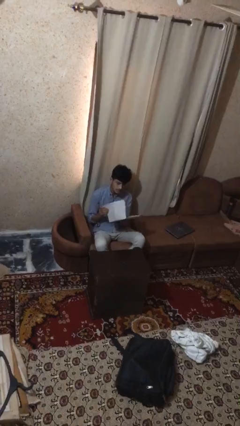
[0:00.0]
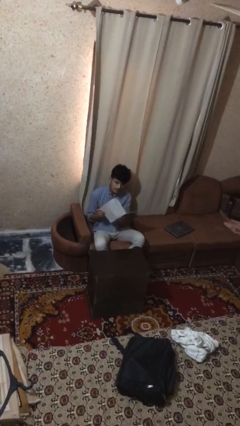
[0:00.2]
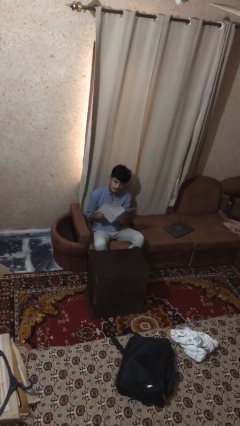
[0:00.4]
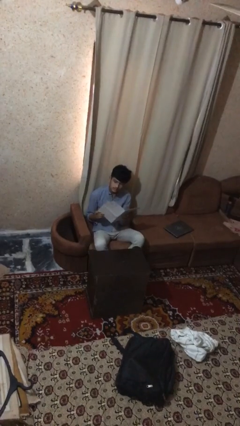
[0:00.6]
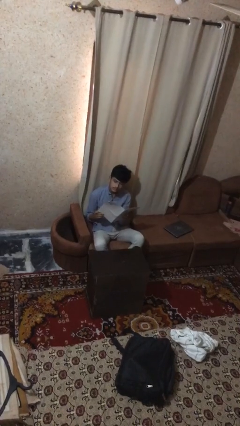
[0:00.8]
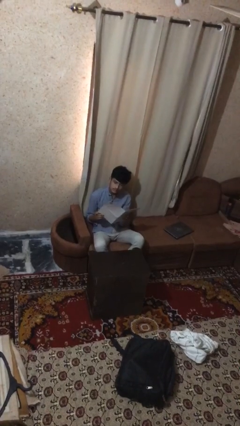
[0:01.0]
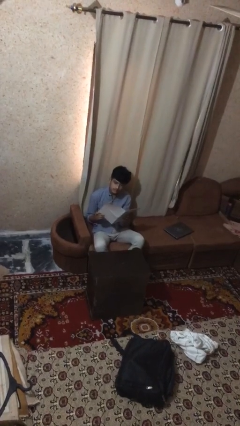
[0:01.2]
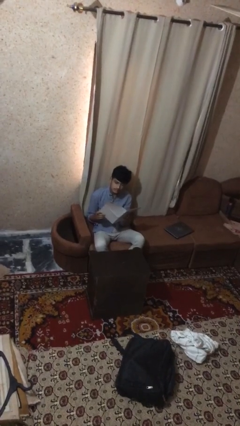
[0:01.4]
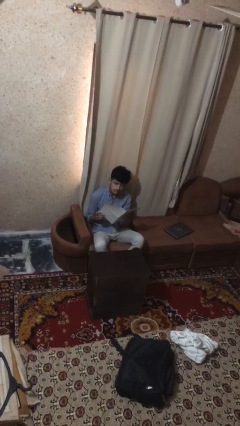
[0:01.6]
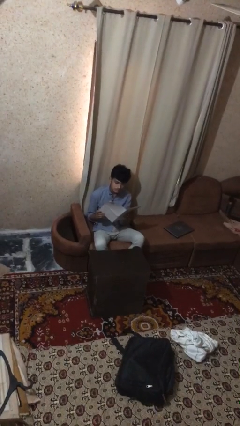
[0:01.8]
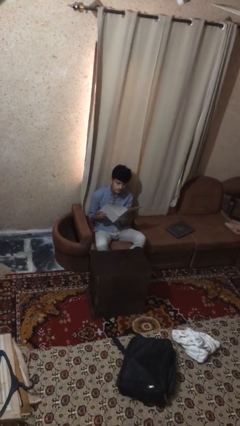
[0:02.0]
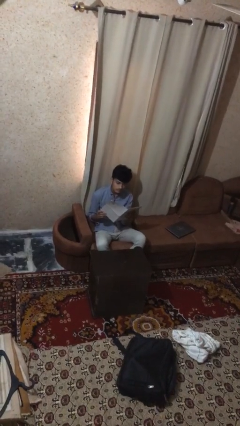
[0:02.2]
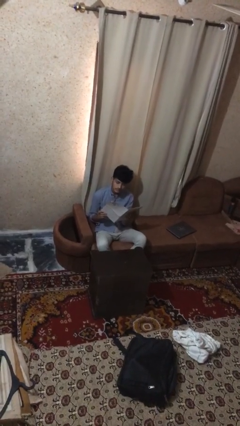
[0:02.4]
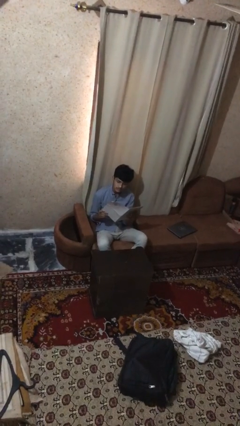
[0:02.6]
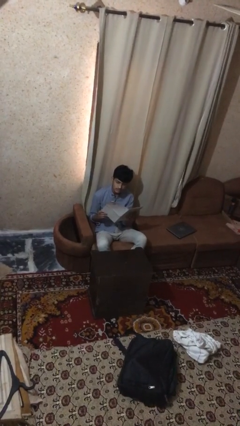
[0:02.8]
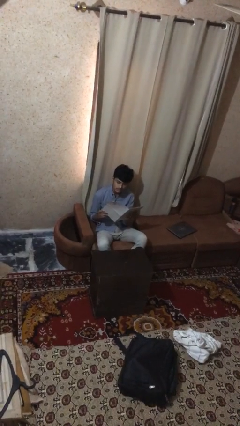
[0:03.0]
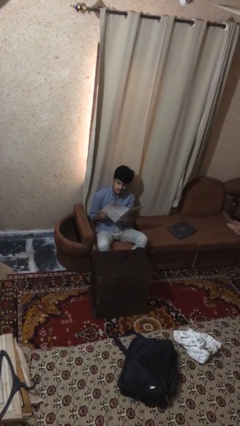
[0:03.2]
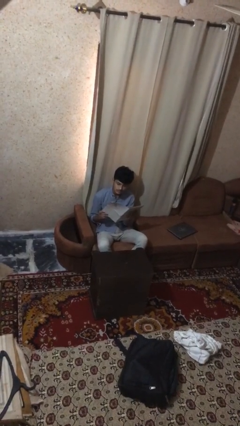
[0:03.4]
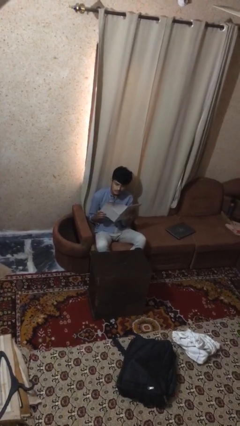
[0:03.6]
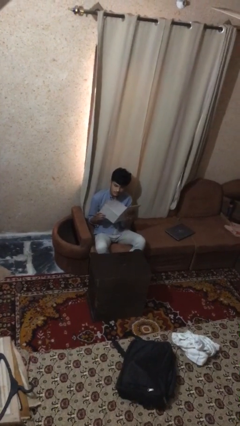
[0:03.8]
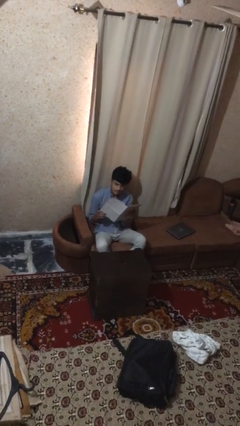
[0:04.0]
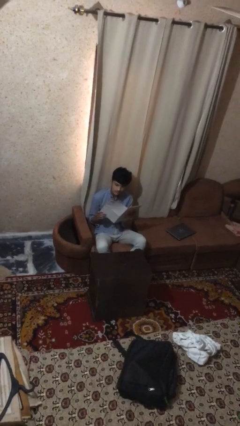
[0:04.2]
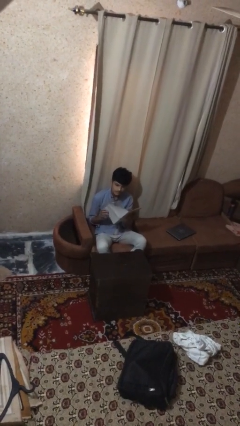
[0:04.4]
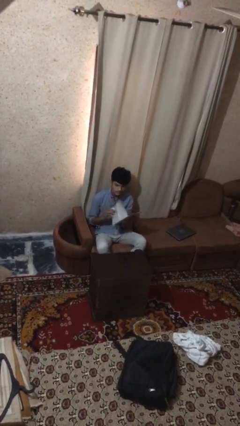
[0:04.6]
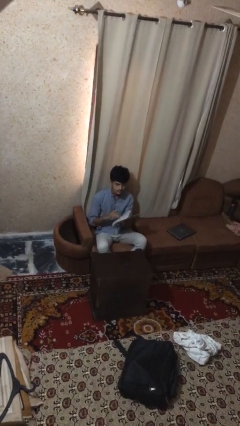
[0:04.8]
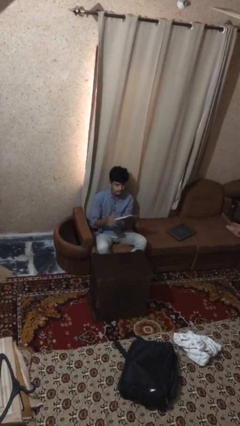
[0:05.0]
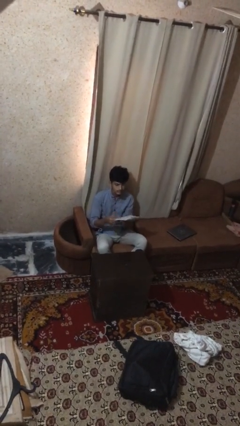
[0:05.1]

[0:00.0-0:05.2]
person reads document

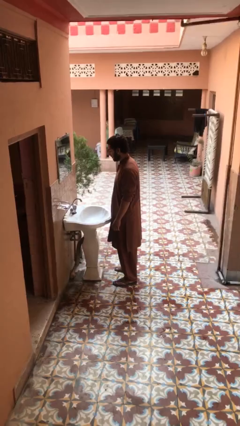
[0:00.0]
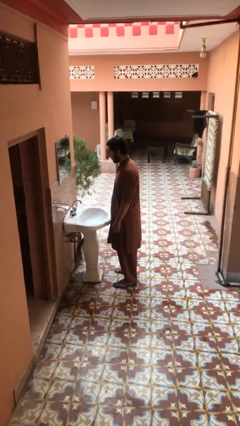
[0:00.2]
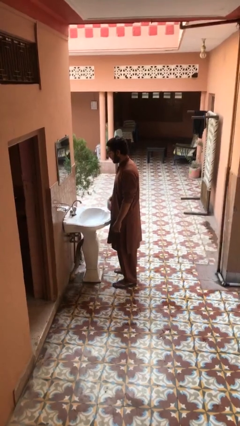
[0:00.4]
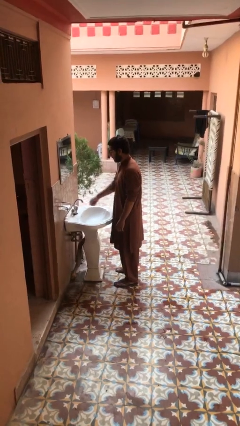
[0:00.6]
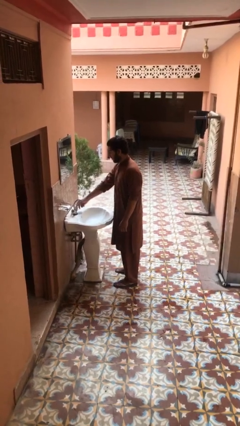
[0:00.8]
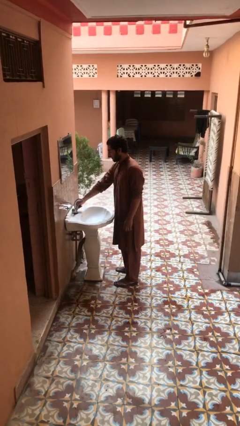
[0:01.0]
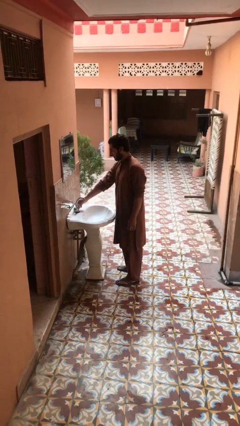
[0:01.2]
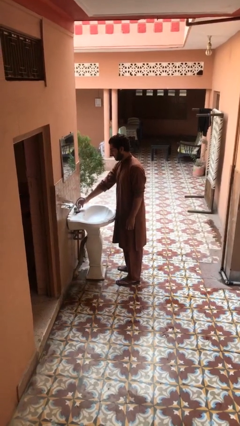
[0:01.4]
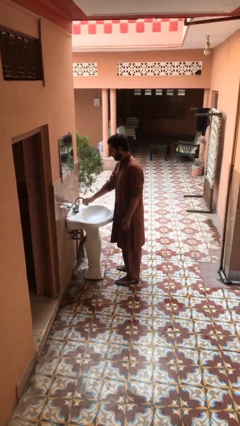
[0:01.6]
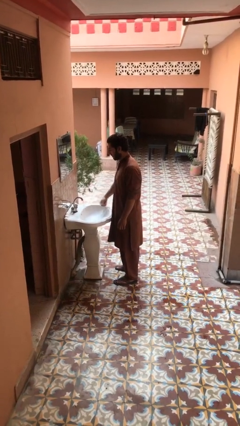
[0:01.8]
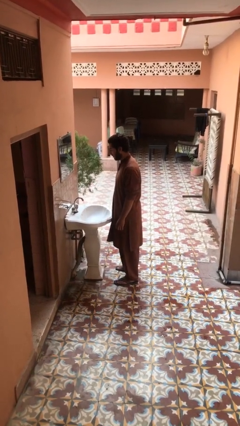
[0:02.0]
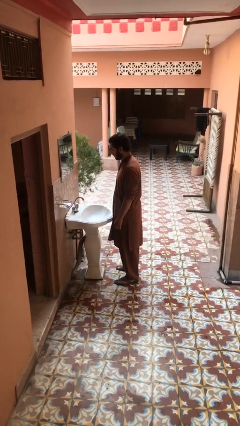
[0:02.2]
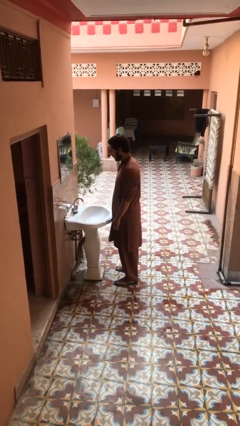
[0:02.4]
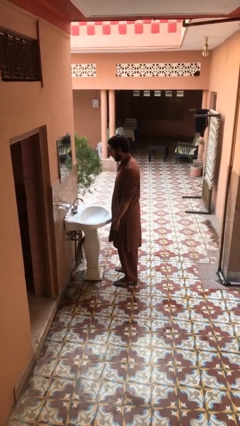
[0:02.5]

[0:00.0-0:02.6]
person turns on faucet

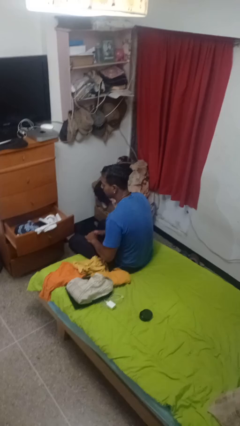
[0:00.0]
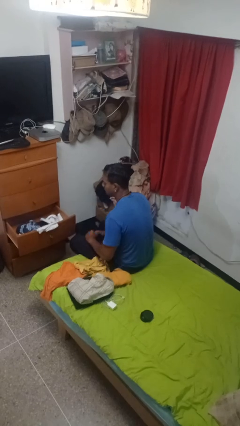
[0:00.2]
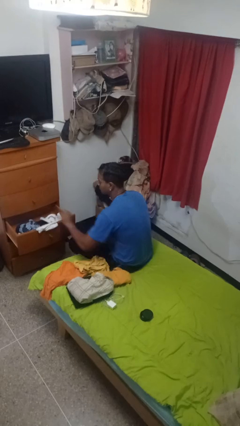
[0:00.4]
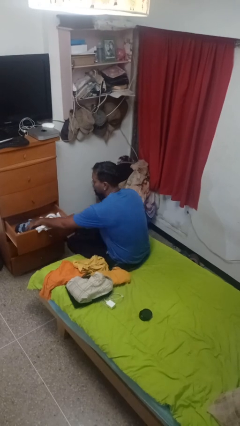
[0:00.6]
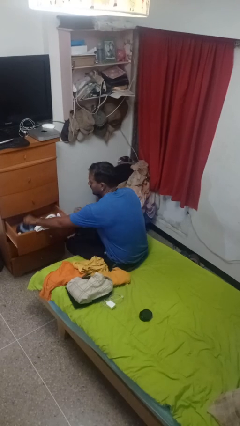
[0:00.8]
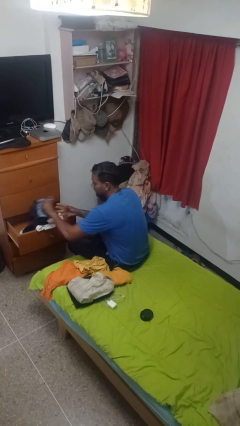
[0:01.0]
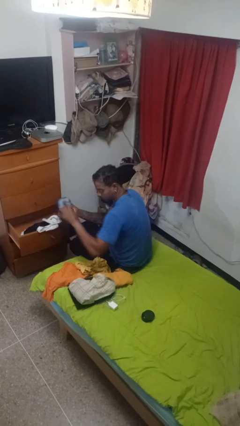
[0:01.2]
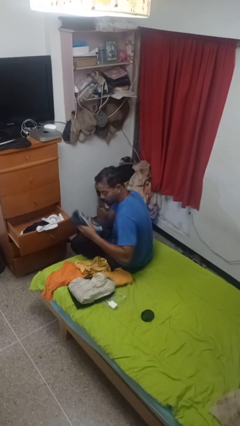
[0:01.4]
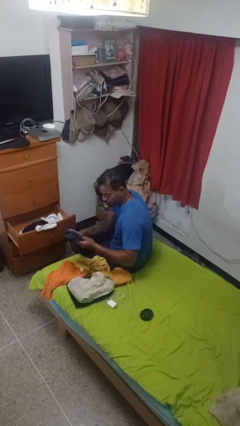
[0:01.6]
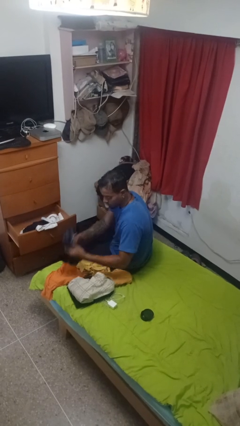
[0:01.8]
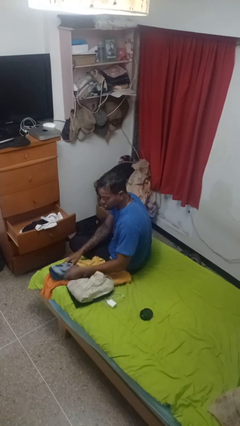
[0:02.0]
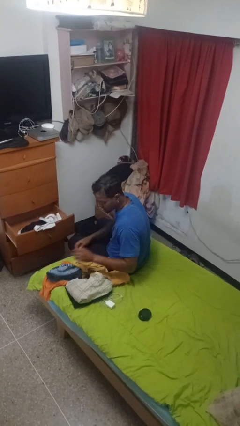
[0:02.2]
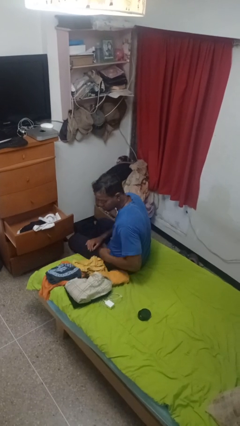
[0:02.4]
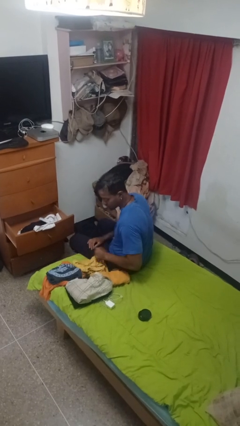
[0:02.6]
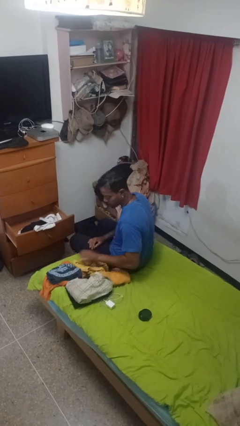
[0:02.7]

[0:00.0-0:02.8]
person takes clothes from dresser

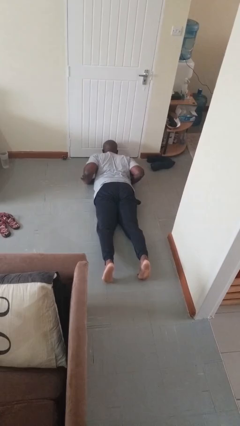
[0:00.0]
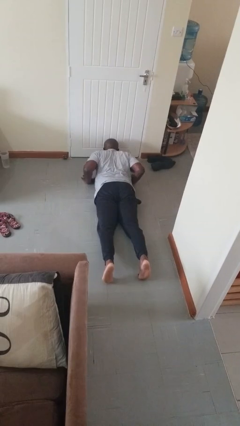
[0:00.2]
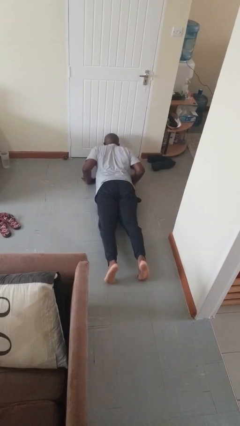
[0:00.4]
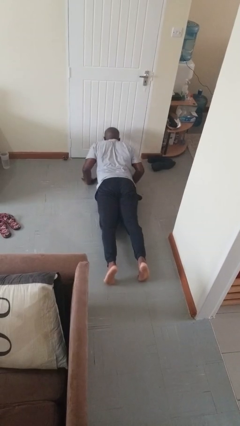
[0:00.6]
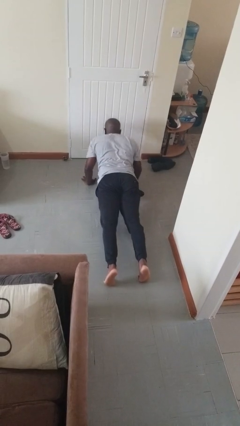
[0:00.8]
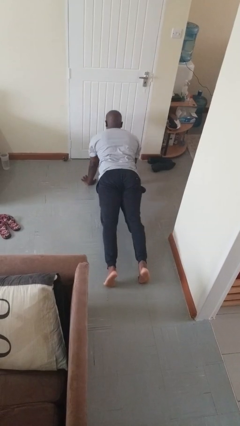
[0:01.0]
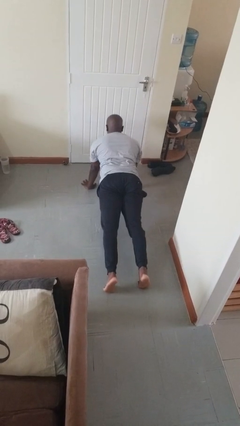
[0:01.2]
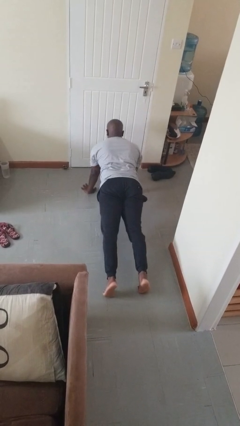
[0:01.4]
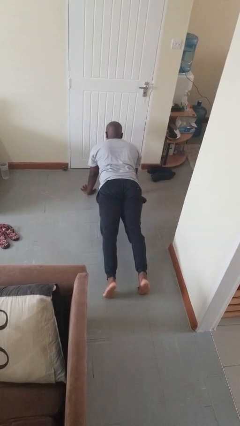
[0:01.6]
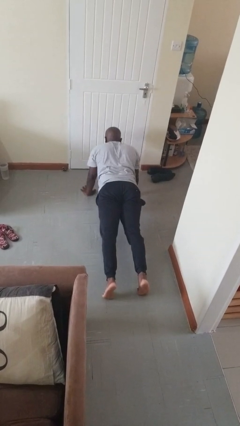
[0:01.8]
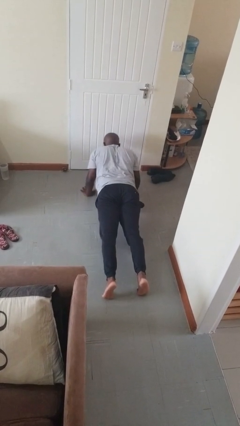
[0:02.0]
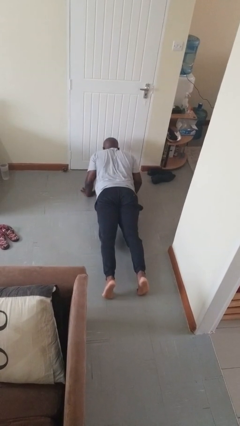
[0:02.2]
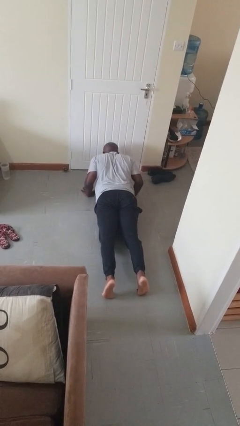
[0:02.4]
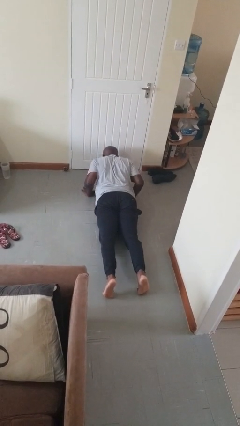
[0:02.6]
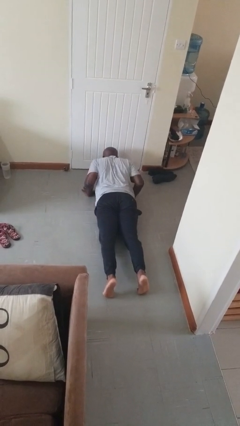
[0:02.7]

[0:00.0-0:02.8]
person exercises with pushup

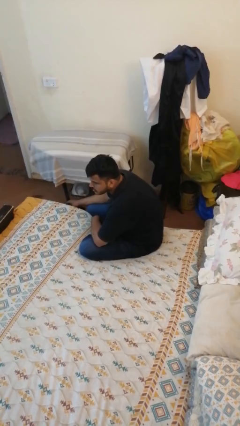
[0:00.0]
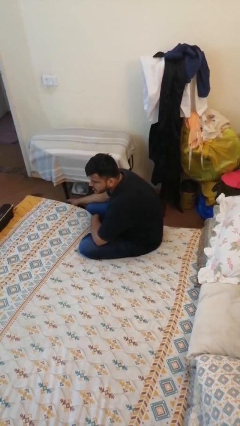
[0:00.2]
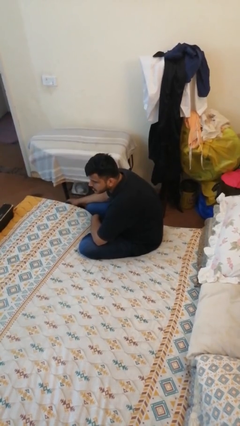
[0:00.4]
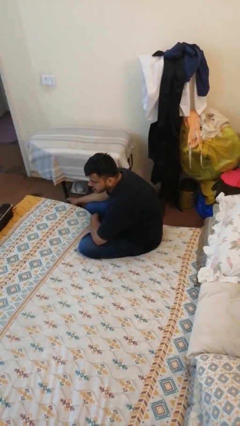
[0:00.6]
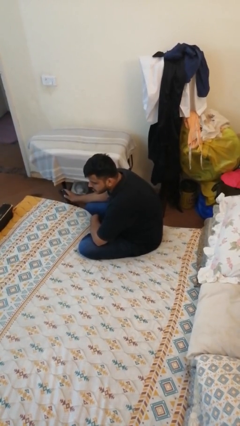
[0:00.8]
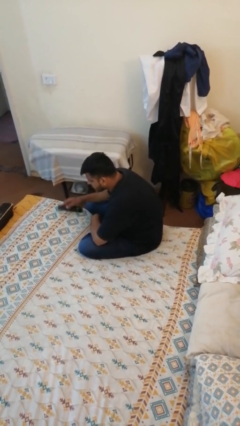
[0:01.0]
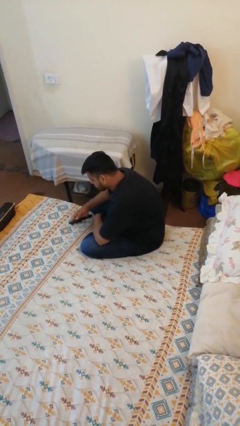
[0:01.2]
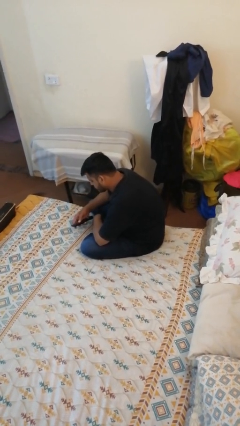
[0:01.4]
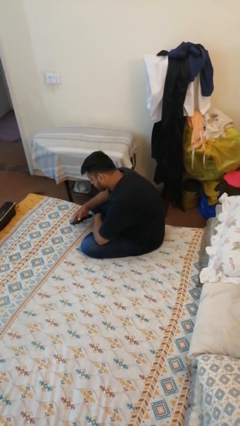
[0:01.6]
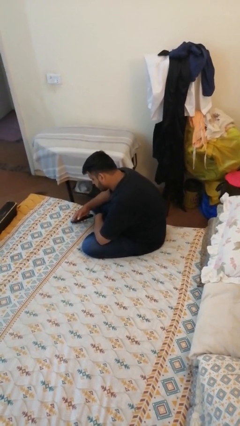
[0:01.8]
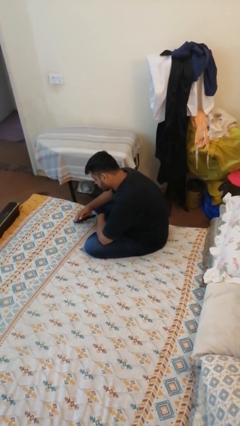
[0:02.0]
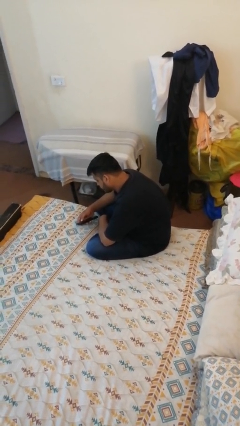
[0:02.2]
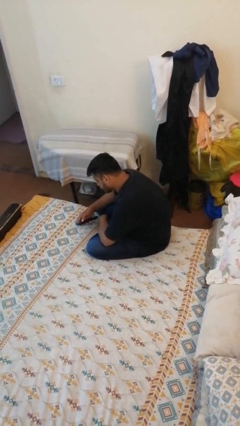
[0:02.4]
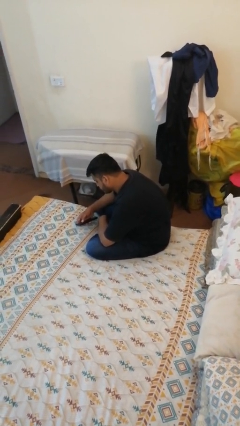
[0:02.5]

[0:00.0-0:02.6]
person uses television remote

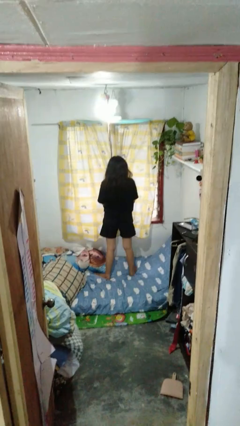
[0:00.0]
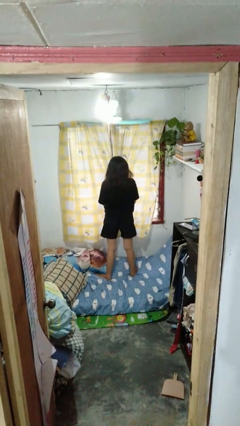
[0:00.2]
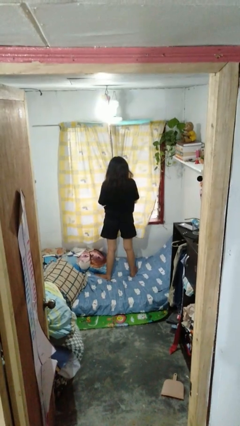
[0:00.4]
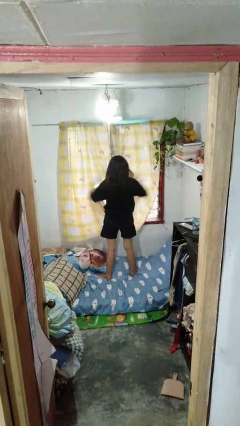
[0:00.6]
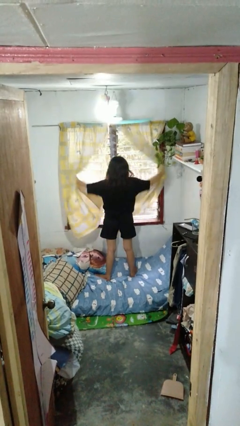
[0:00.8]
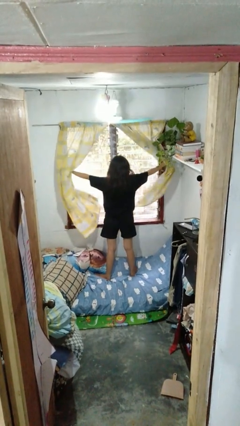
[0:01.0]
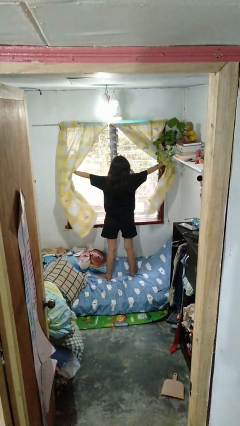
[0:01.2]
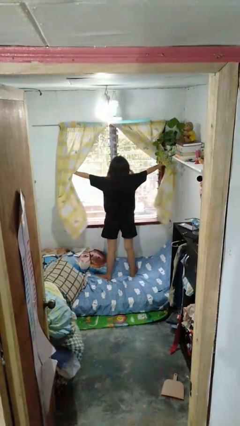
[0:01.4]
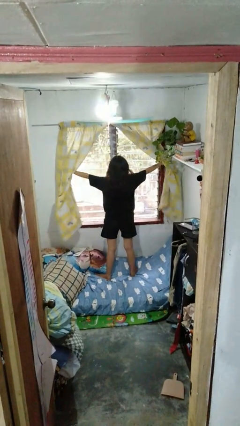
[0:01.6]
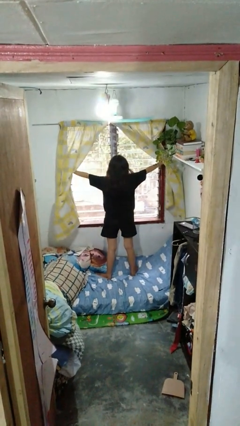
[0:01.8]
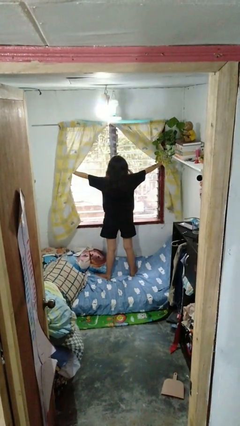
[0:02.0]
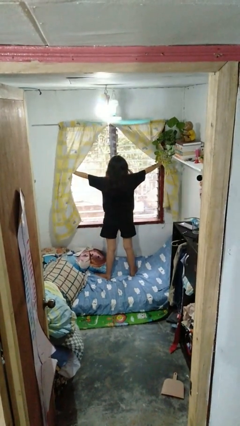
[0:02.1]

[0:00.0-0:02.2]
person opens curtains
